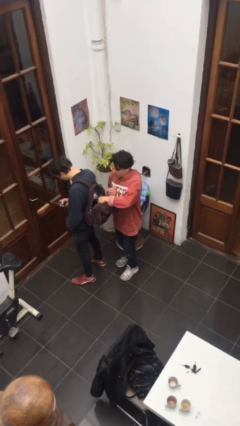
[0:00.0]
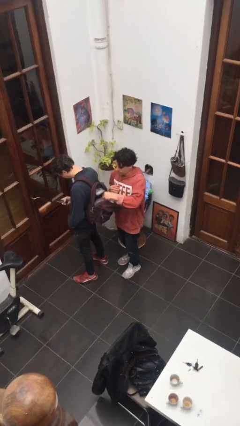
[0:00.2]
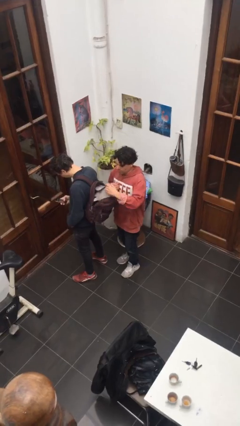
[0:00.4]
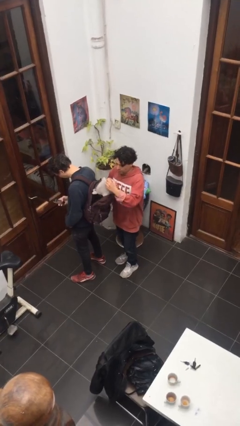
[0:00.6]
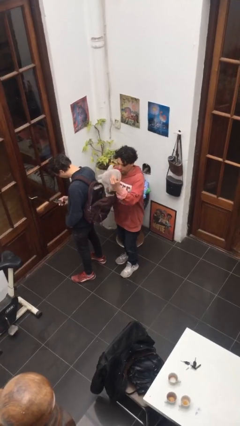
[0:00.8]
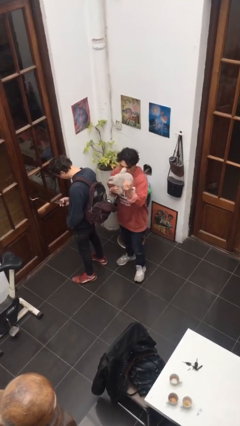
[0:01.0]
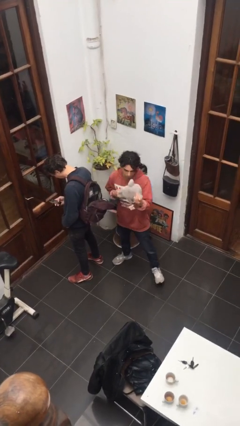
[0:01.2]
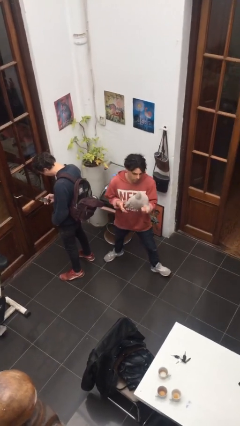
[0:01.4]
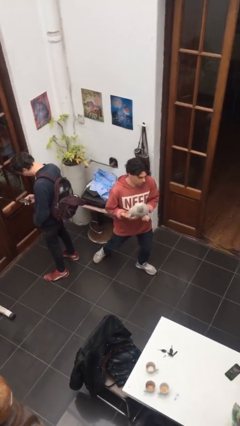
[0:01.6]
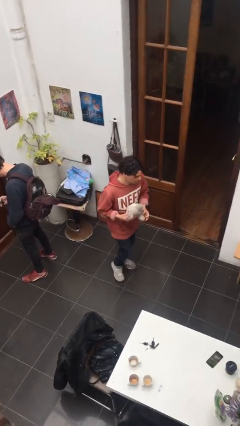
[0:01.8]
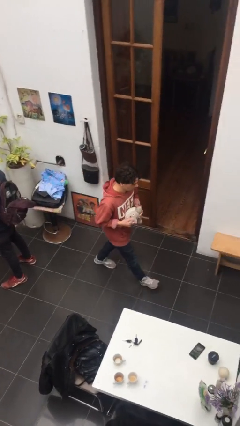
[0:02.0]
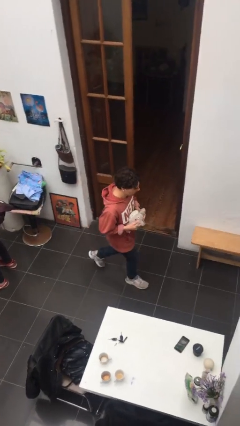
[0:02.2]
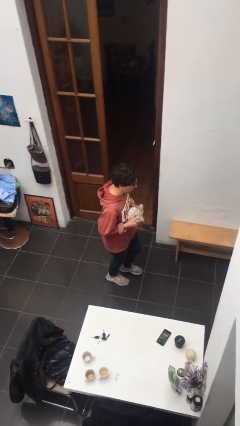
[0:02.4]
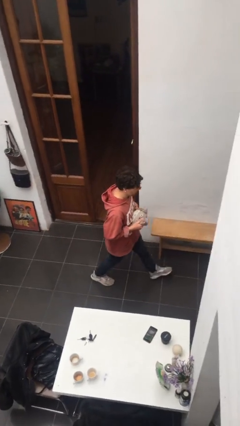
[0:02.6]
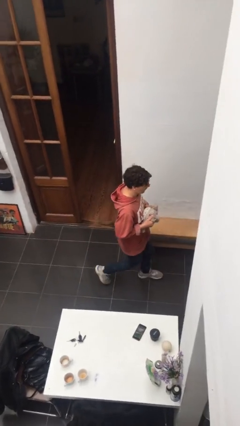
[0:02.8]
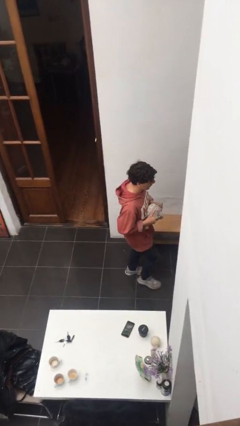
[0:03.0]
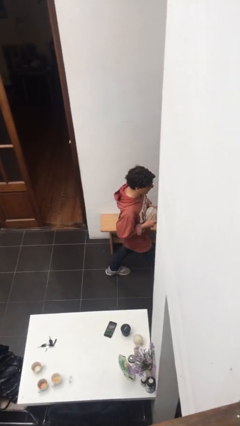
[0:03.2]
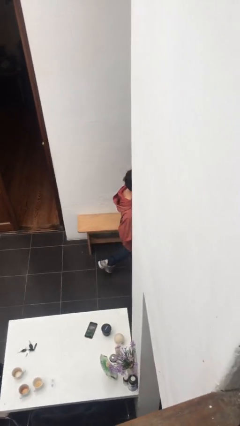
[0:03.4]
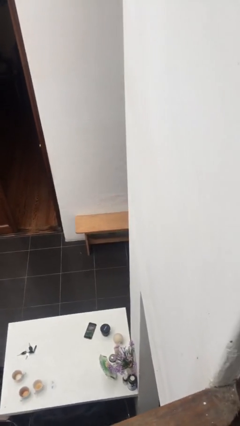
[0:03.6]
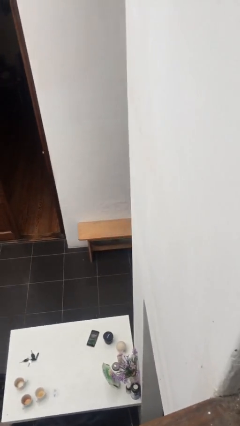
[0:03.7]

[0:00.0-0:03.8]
person steals object from person

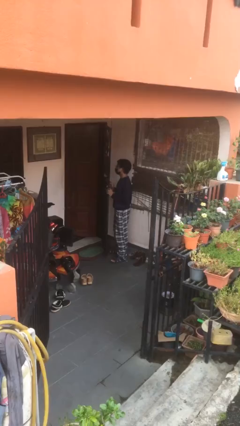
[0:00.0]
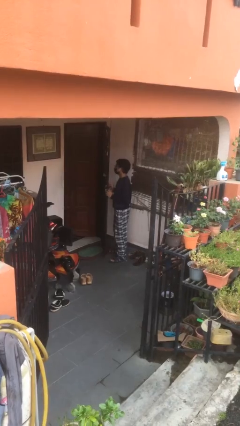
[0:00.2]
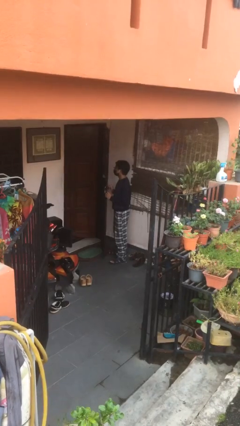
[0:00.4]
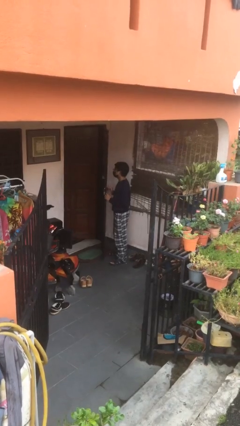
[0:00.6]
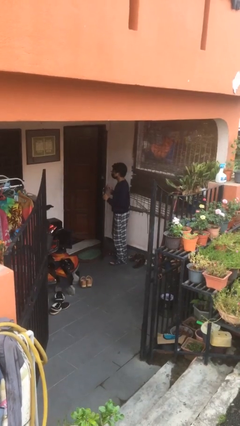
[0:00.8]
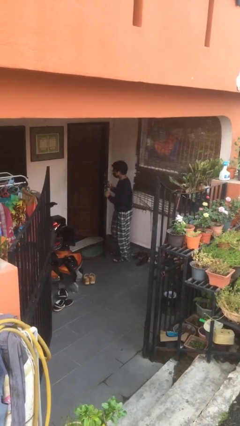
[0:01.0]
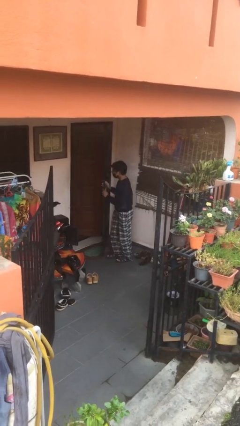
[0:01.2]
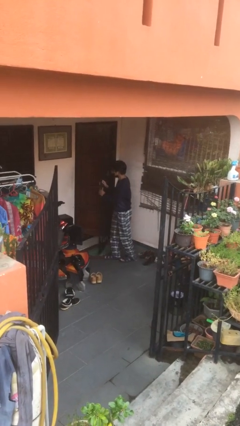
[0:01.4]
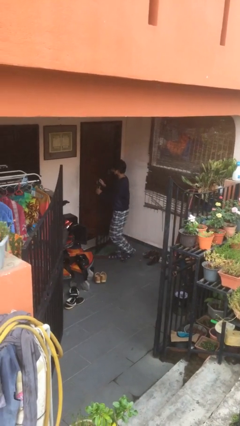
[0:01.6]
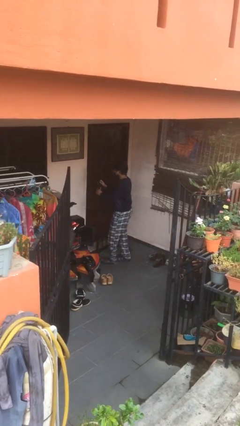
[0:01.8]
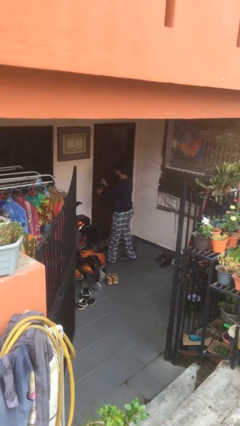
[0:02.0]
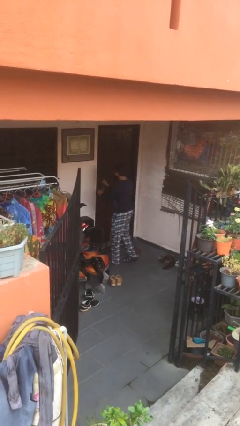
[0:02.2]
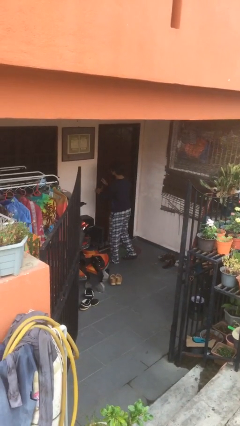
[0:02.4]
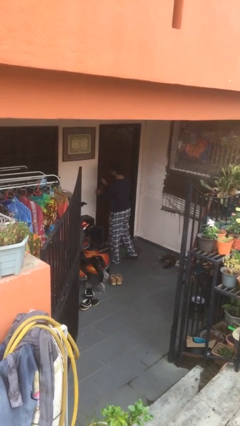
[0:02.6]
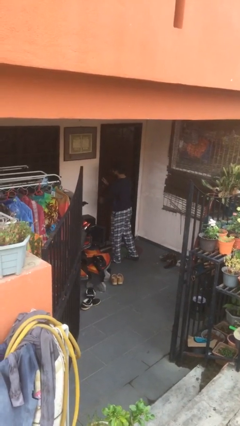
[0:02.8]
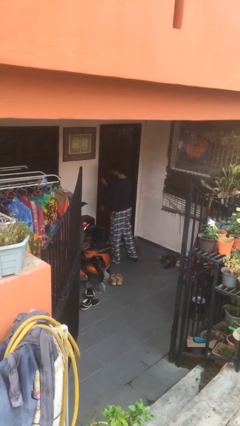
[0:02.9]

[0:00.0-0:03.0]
person closes facility door

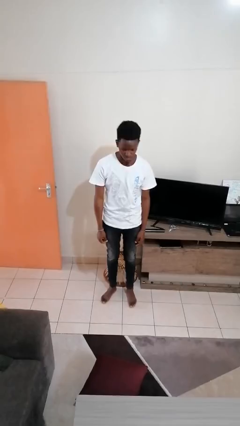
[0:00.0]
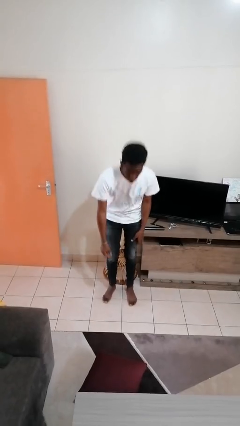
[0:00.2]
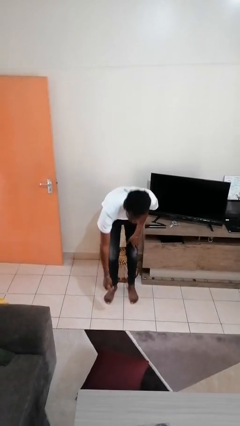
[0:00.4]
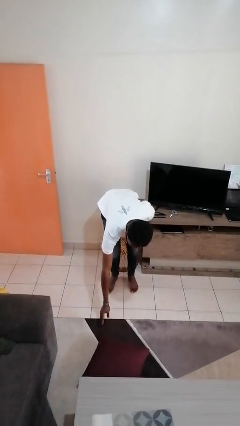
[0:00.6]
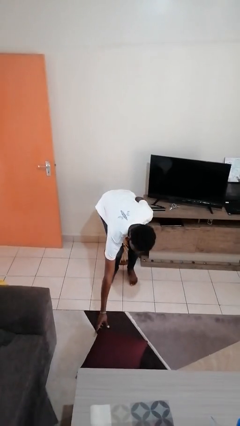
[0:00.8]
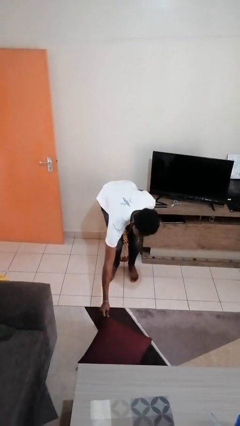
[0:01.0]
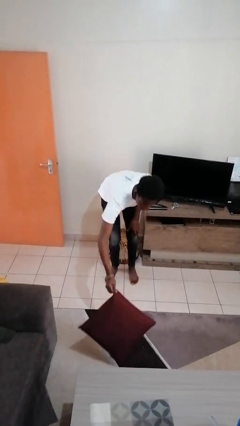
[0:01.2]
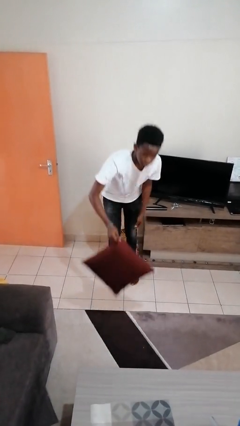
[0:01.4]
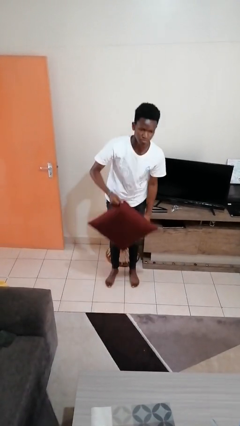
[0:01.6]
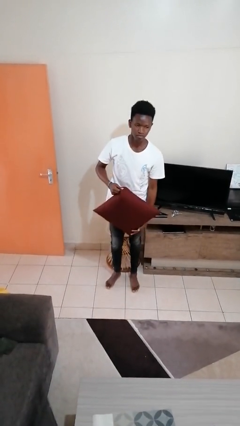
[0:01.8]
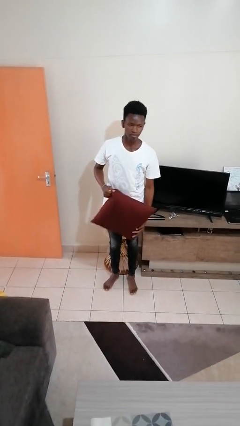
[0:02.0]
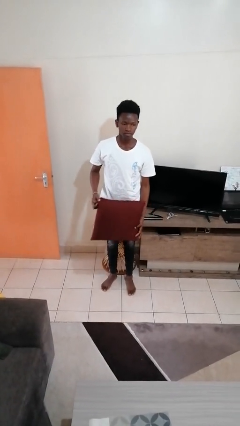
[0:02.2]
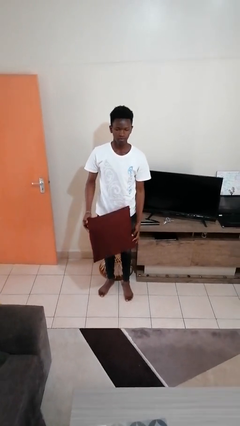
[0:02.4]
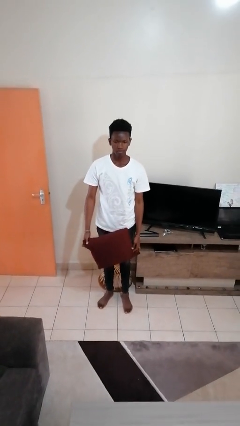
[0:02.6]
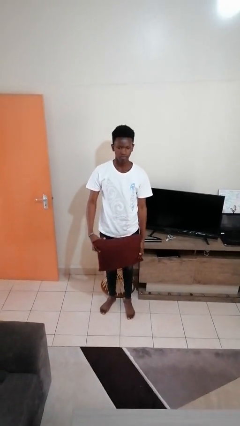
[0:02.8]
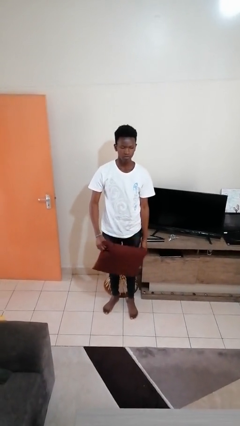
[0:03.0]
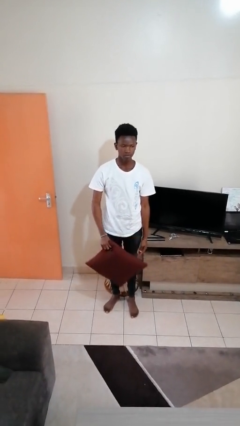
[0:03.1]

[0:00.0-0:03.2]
person picks up object from floor

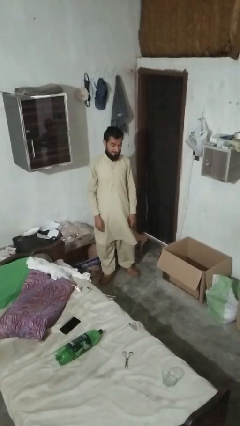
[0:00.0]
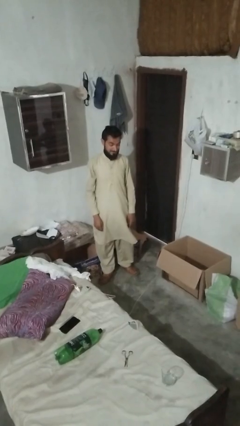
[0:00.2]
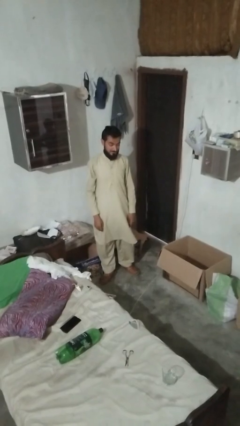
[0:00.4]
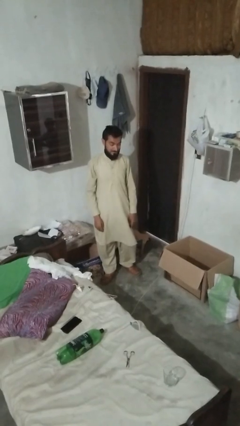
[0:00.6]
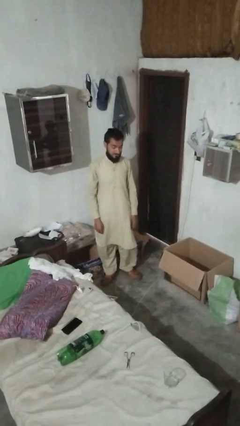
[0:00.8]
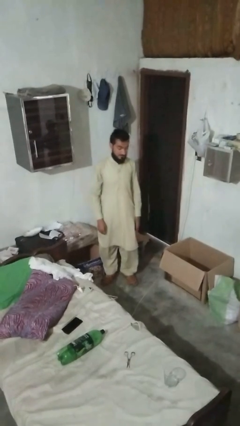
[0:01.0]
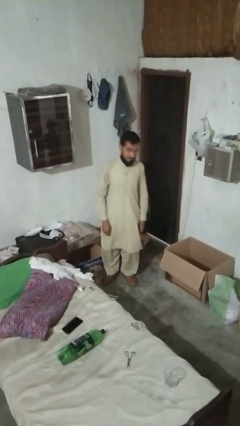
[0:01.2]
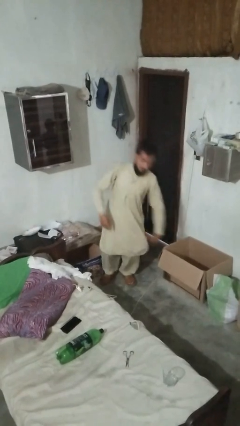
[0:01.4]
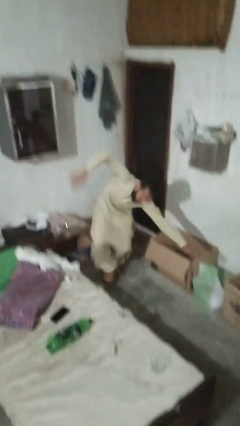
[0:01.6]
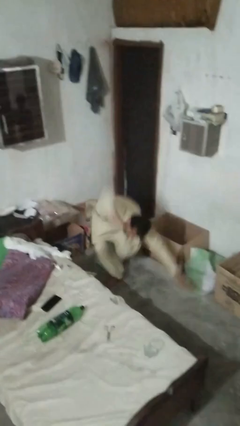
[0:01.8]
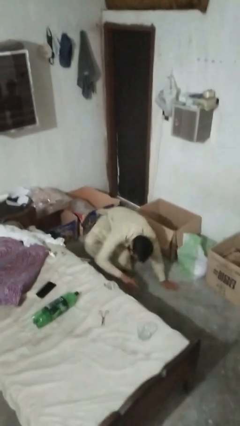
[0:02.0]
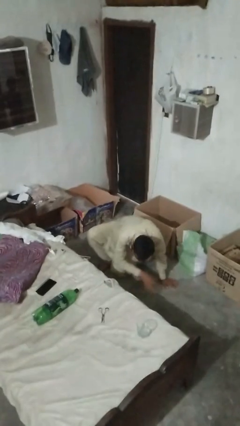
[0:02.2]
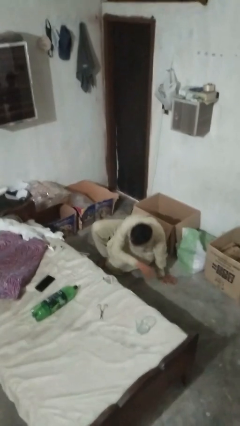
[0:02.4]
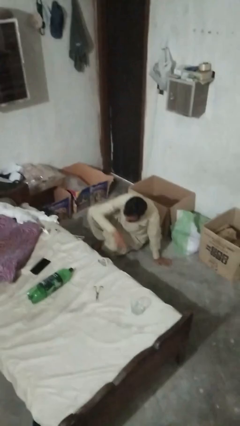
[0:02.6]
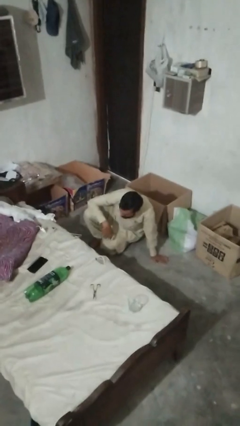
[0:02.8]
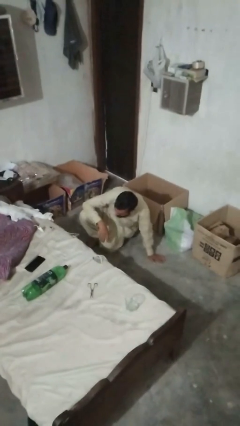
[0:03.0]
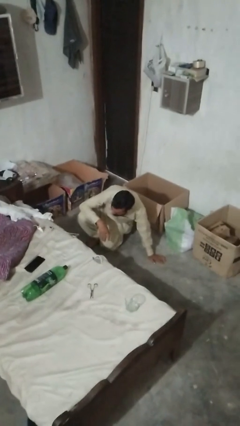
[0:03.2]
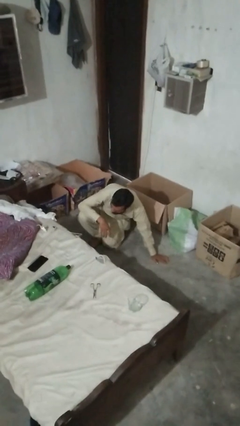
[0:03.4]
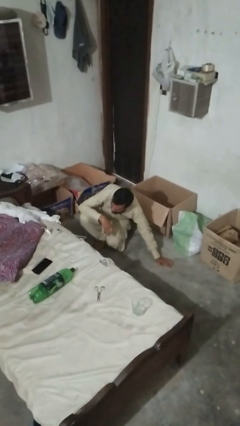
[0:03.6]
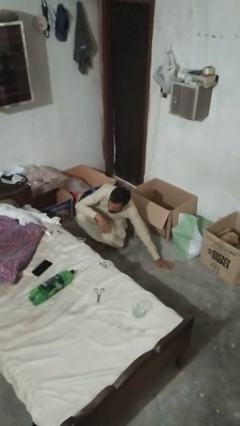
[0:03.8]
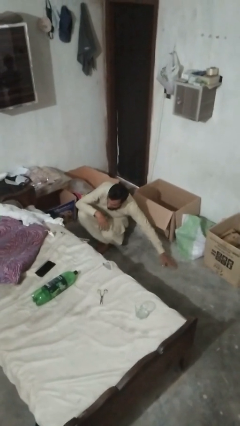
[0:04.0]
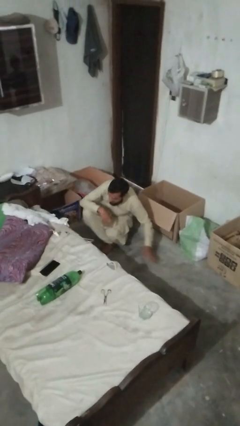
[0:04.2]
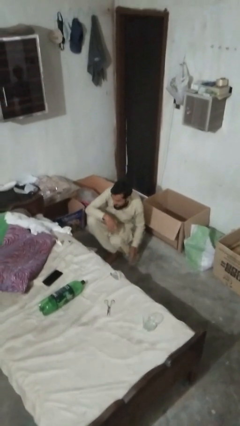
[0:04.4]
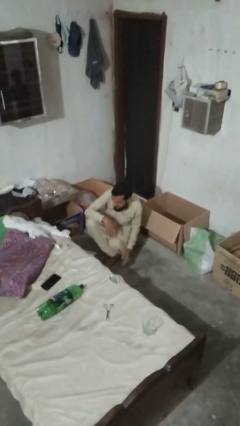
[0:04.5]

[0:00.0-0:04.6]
person trips on object on floor

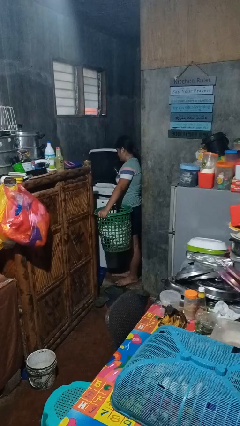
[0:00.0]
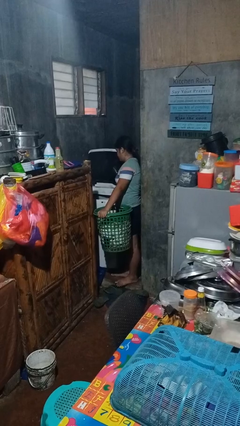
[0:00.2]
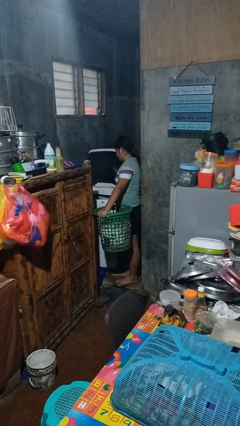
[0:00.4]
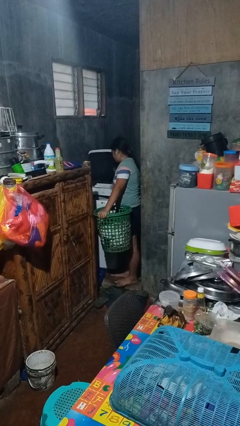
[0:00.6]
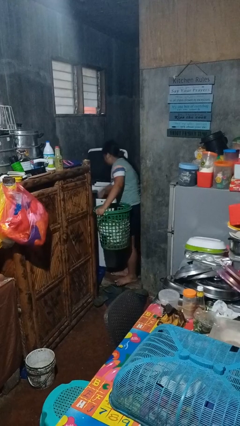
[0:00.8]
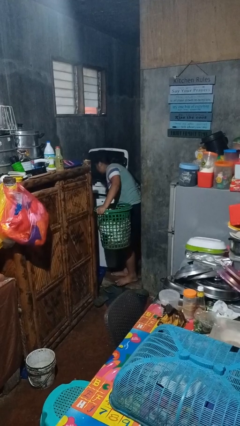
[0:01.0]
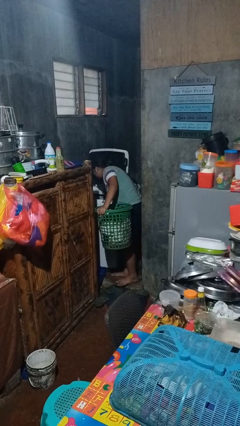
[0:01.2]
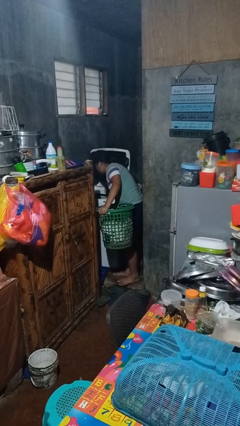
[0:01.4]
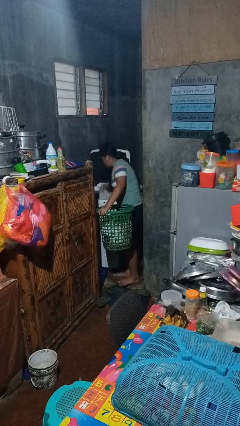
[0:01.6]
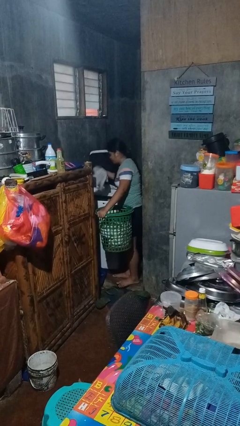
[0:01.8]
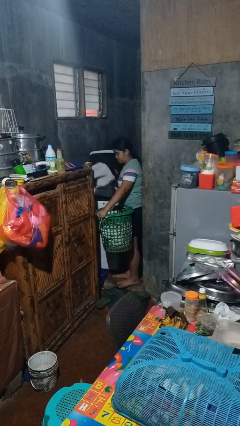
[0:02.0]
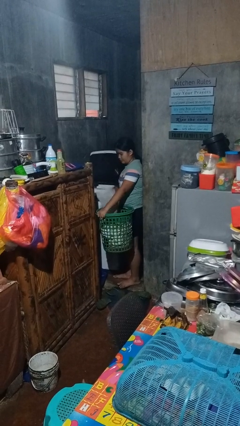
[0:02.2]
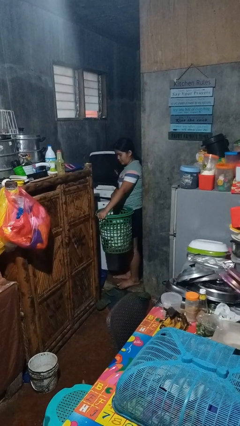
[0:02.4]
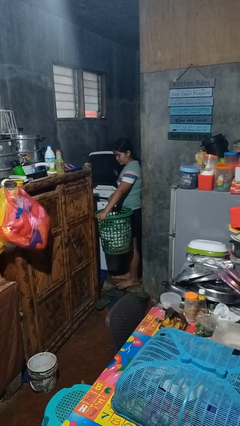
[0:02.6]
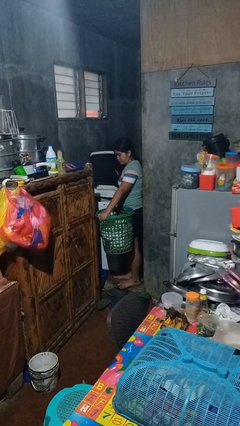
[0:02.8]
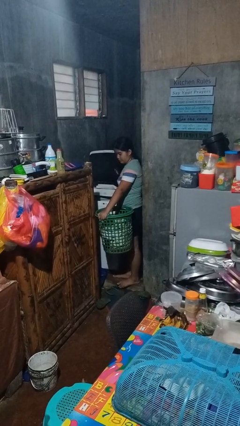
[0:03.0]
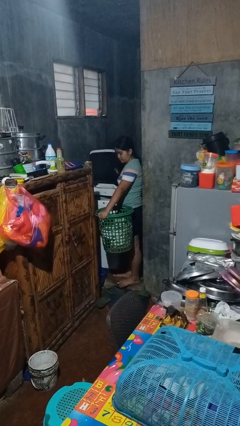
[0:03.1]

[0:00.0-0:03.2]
person unloads clotheswasher
